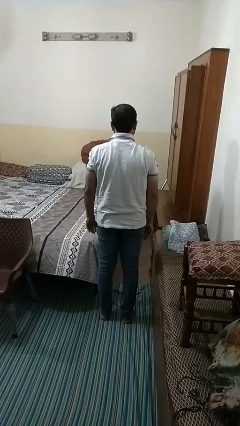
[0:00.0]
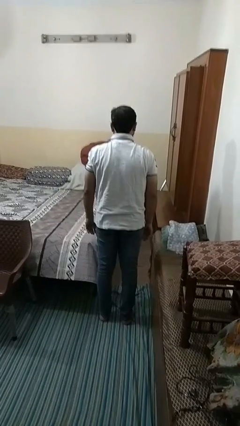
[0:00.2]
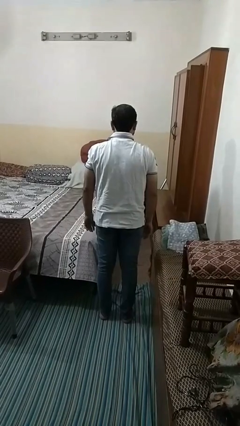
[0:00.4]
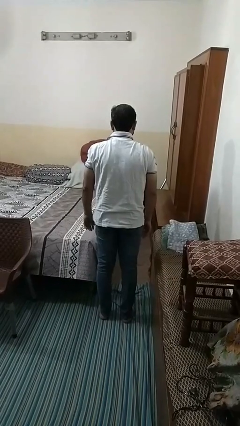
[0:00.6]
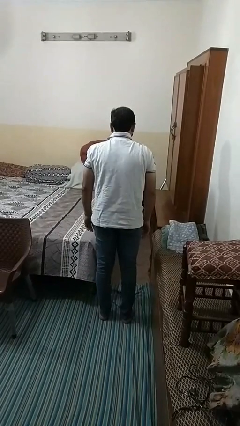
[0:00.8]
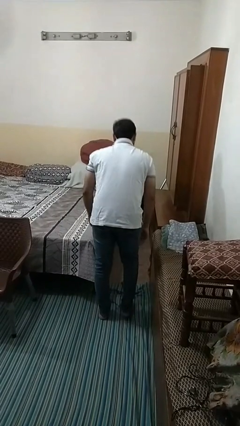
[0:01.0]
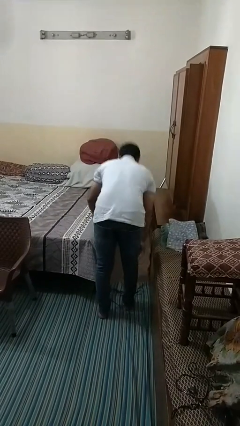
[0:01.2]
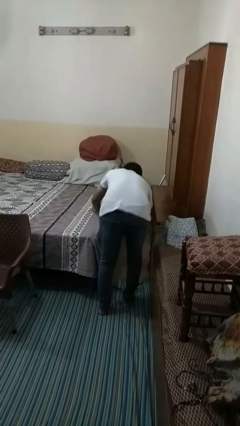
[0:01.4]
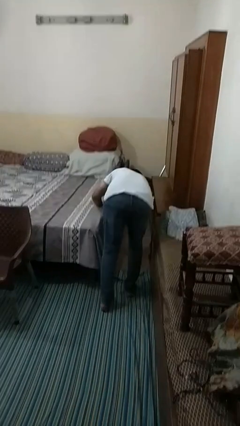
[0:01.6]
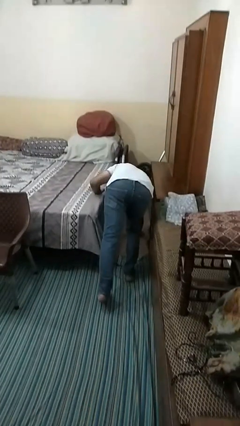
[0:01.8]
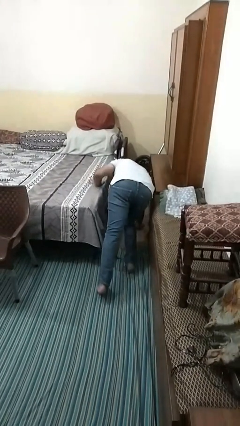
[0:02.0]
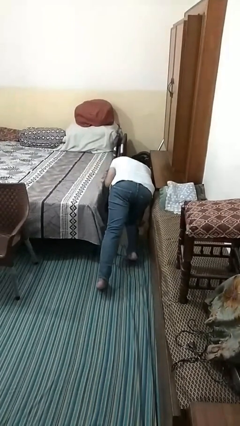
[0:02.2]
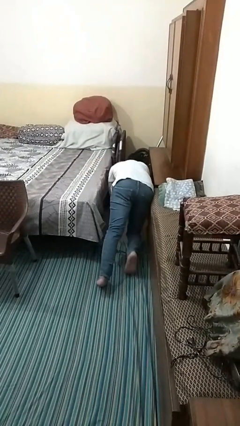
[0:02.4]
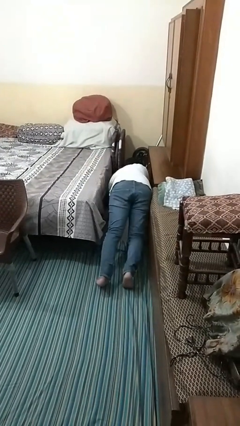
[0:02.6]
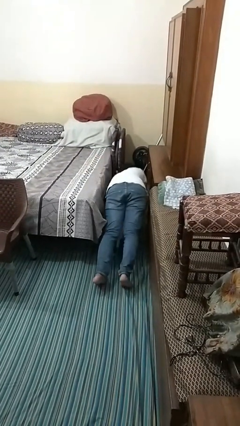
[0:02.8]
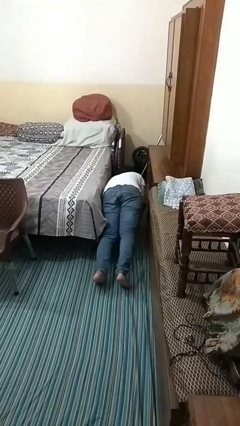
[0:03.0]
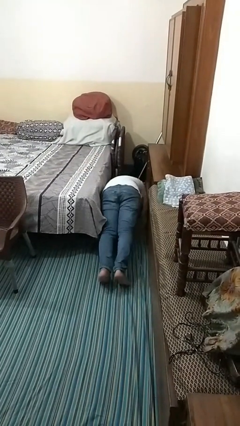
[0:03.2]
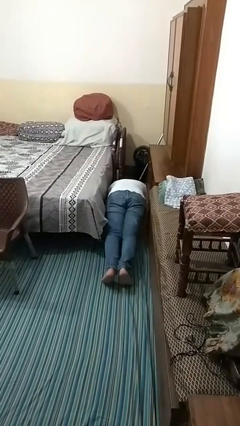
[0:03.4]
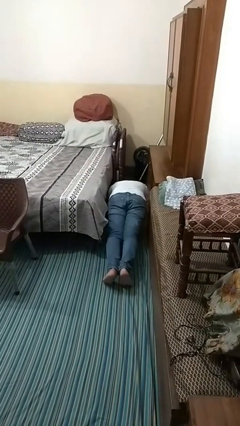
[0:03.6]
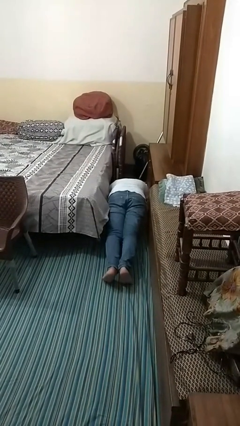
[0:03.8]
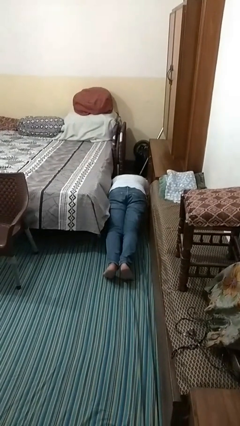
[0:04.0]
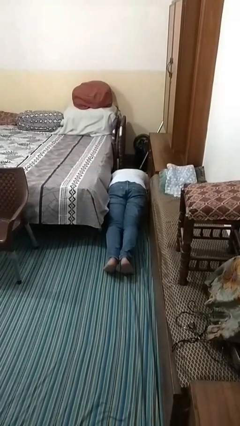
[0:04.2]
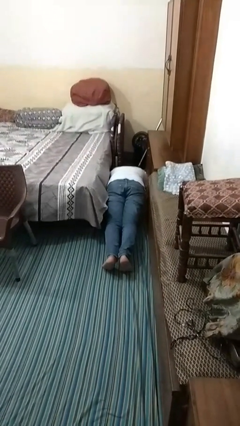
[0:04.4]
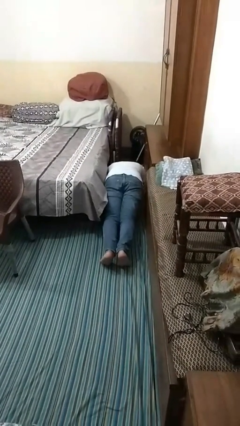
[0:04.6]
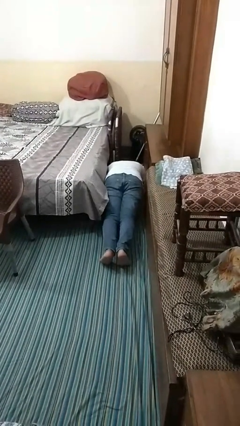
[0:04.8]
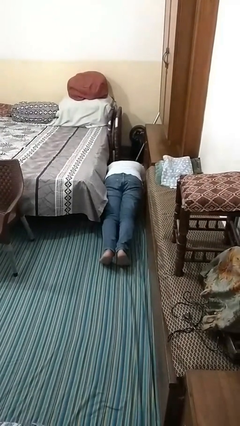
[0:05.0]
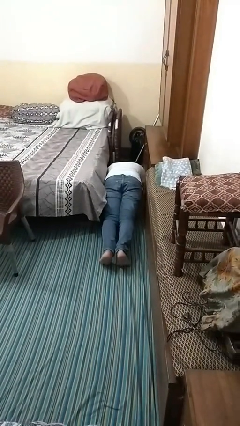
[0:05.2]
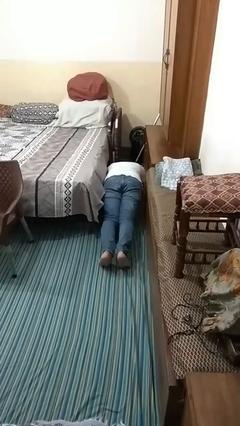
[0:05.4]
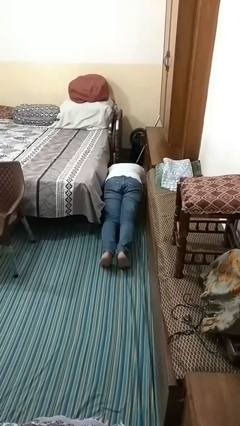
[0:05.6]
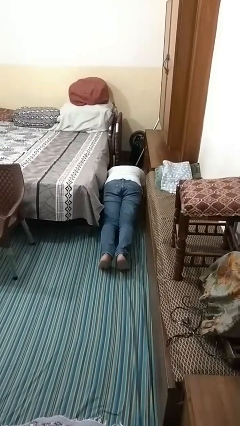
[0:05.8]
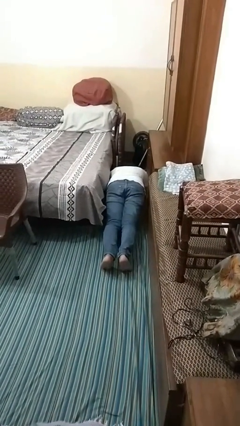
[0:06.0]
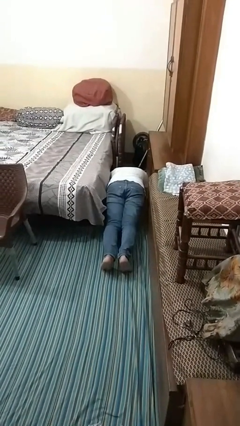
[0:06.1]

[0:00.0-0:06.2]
person exercises with plank

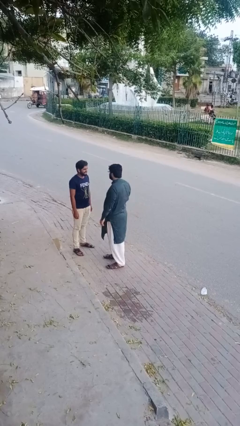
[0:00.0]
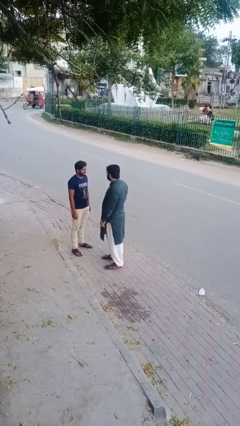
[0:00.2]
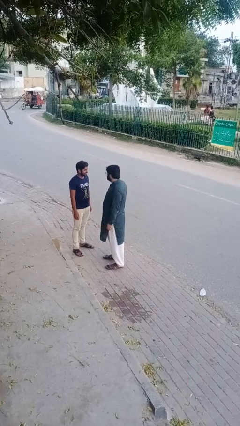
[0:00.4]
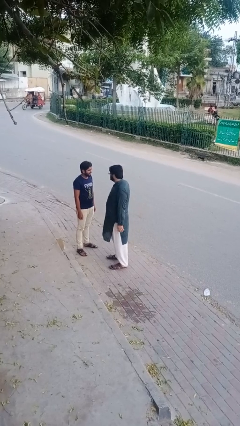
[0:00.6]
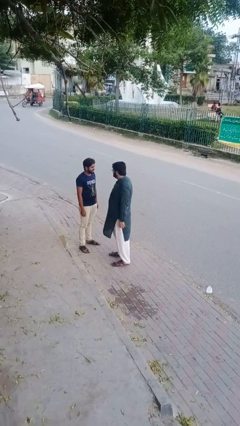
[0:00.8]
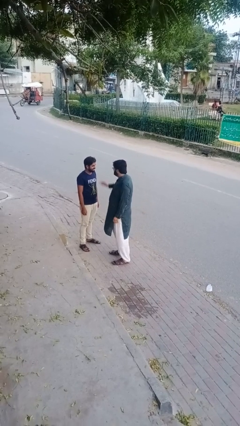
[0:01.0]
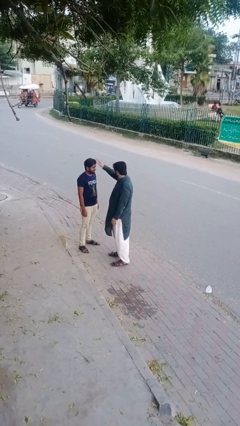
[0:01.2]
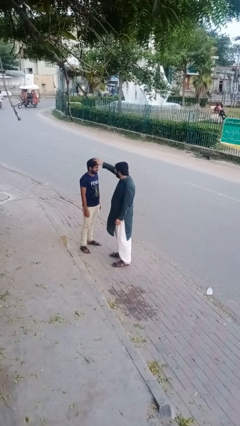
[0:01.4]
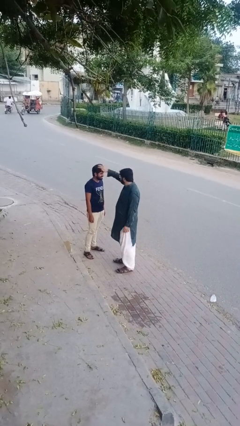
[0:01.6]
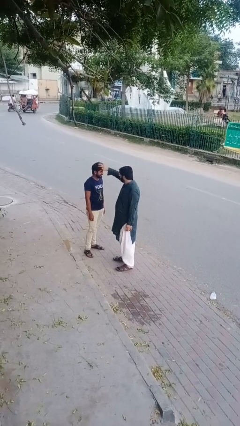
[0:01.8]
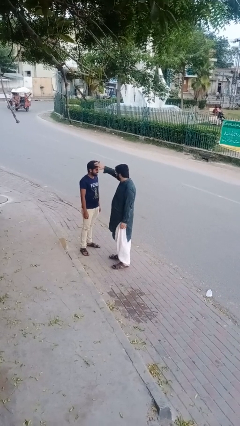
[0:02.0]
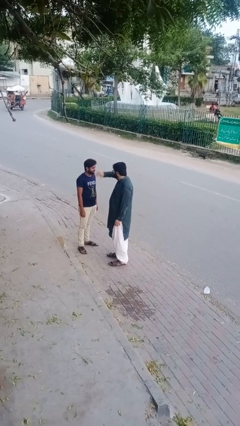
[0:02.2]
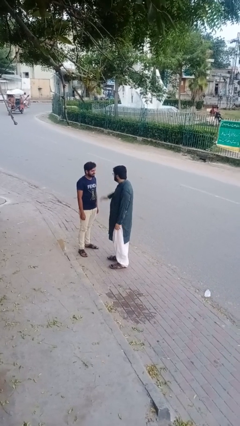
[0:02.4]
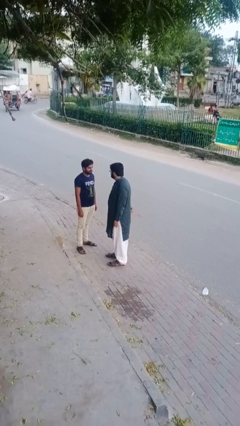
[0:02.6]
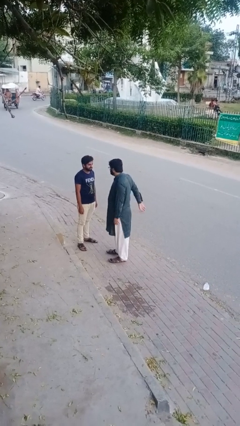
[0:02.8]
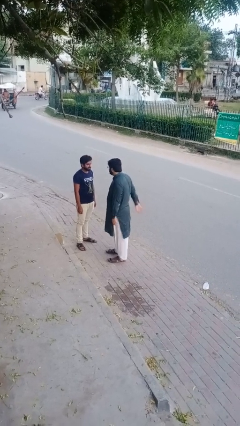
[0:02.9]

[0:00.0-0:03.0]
person grabs person by hair

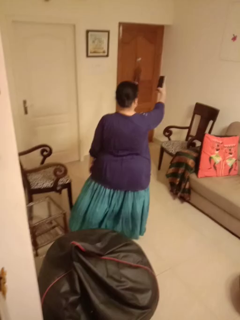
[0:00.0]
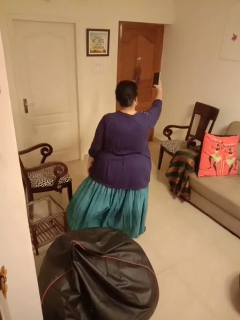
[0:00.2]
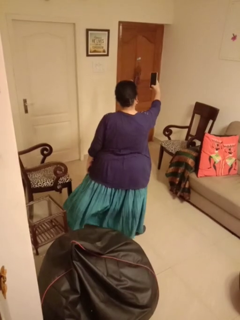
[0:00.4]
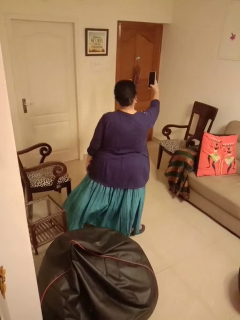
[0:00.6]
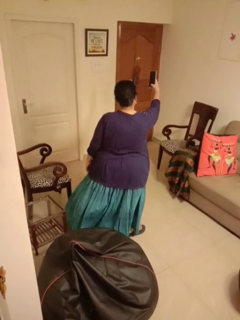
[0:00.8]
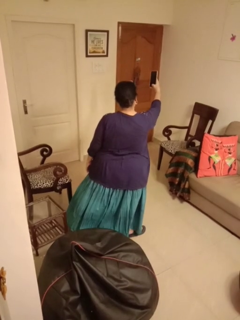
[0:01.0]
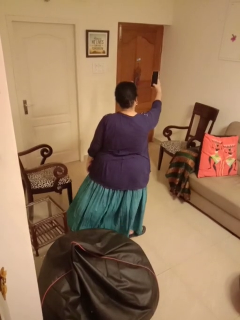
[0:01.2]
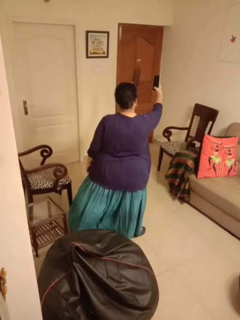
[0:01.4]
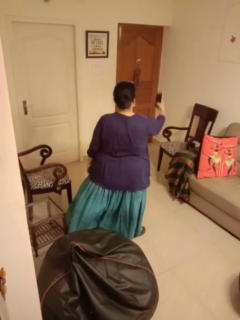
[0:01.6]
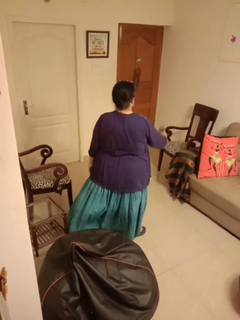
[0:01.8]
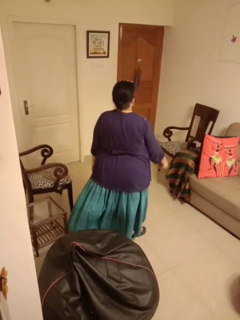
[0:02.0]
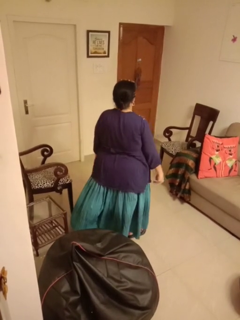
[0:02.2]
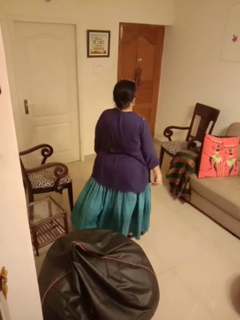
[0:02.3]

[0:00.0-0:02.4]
person takes selfie

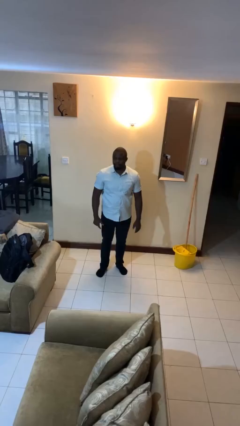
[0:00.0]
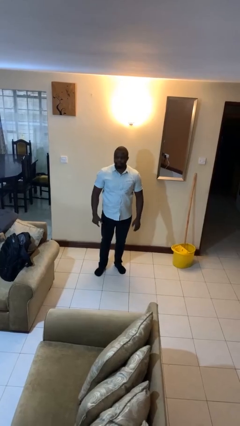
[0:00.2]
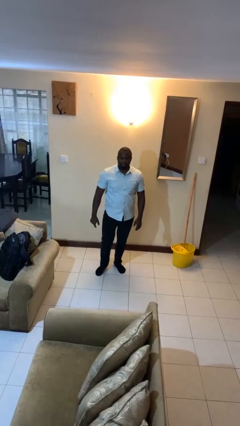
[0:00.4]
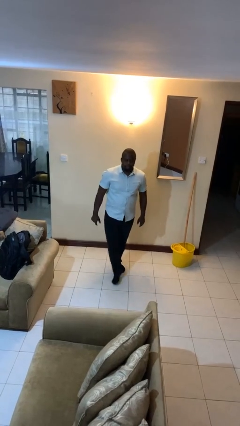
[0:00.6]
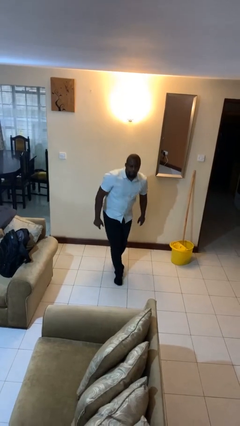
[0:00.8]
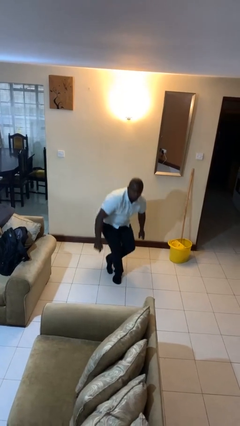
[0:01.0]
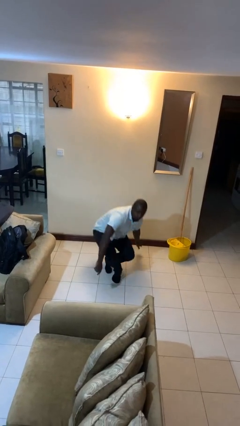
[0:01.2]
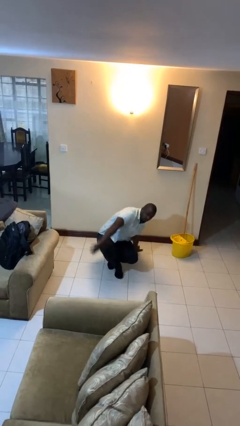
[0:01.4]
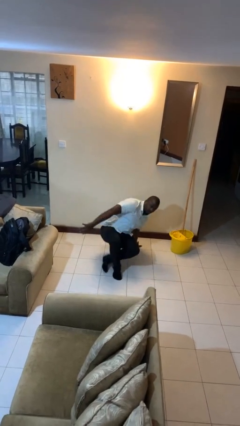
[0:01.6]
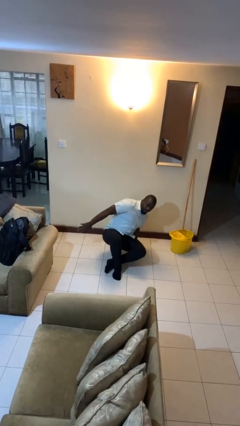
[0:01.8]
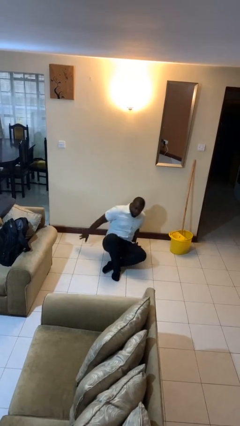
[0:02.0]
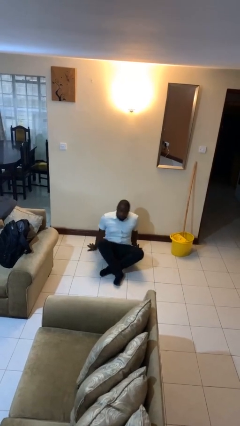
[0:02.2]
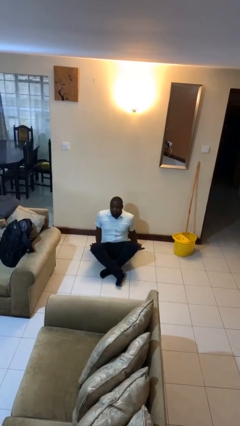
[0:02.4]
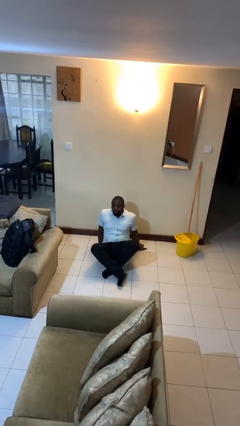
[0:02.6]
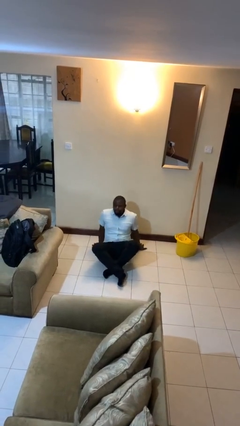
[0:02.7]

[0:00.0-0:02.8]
person sits crisscross

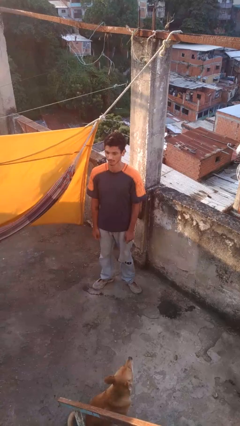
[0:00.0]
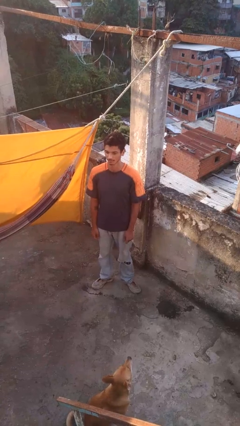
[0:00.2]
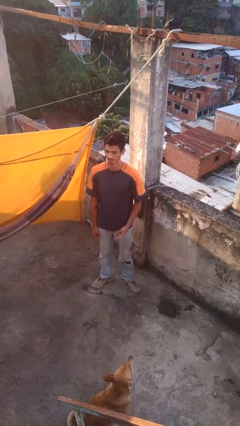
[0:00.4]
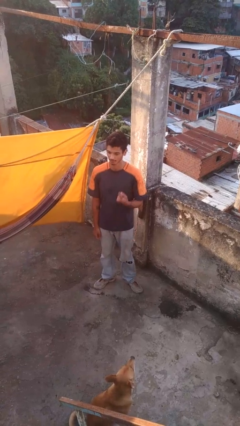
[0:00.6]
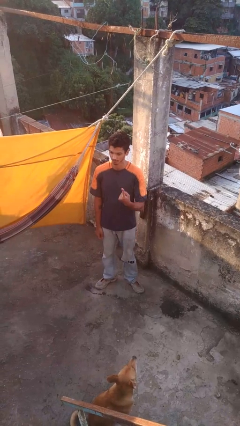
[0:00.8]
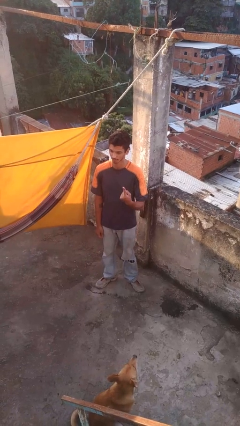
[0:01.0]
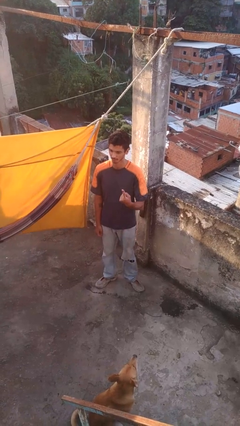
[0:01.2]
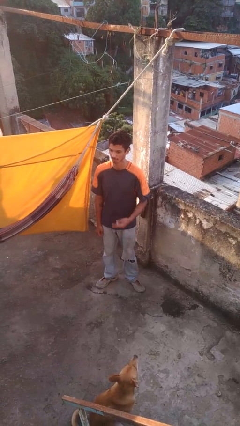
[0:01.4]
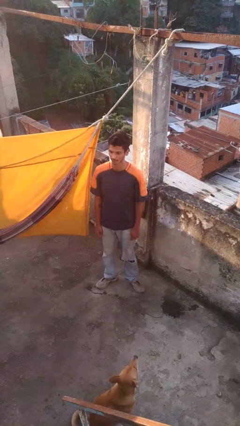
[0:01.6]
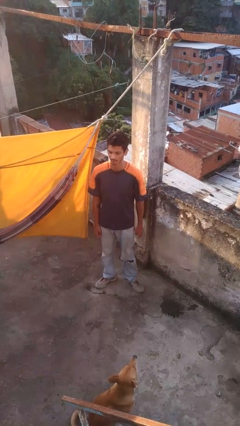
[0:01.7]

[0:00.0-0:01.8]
person gestures number one

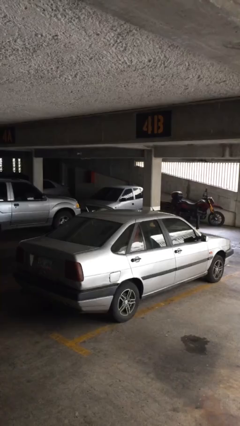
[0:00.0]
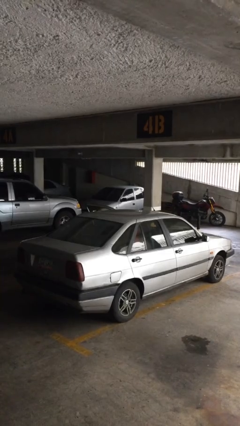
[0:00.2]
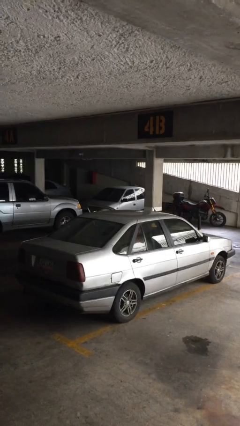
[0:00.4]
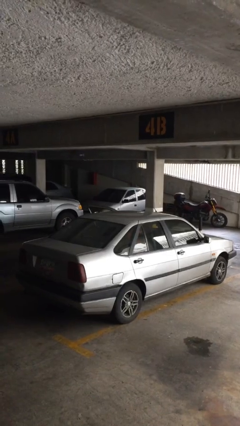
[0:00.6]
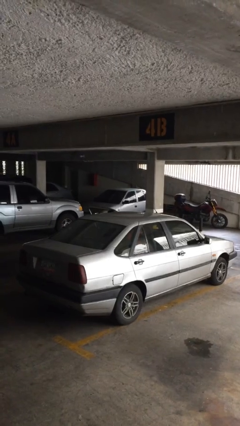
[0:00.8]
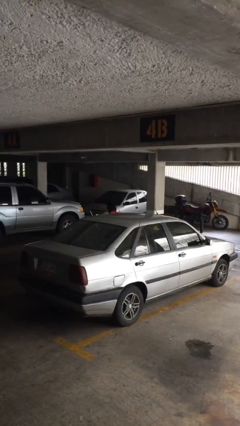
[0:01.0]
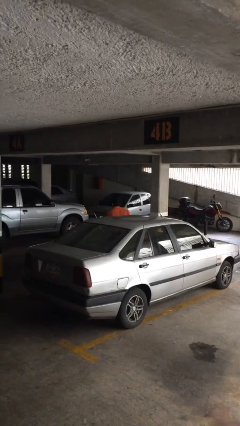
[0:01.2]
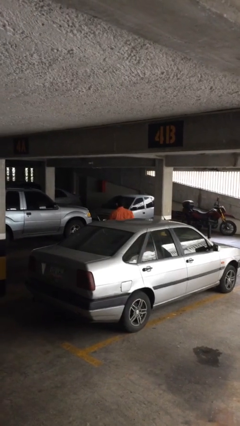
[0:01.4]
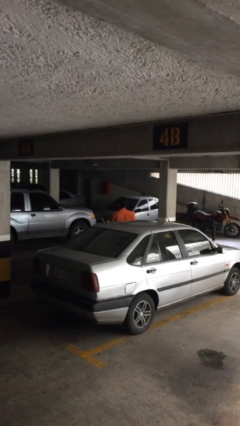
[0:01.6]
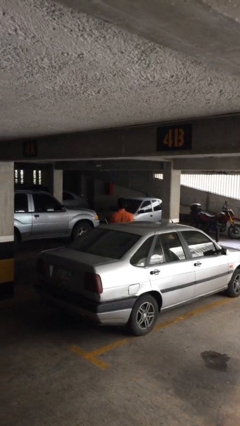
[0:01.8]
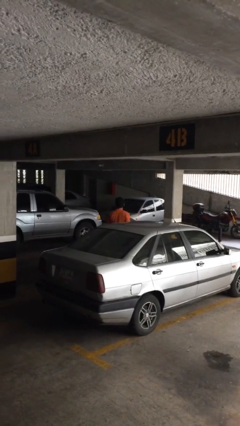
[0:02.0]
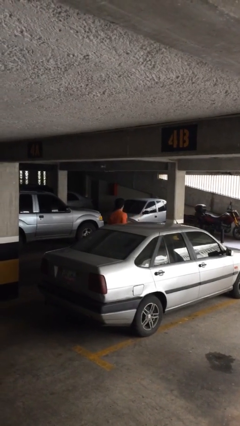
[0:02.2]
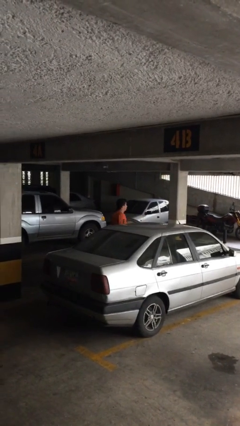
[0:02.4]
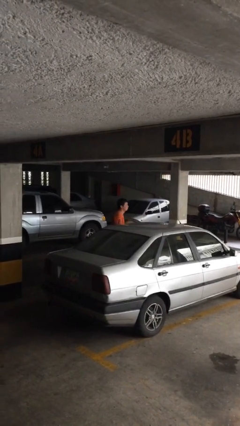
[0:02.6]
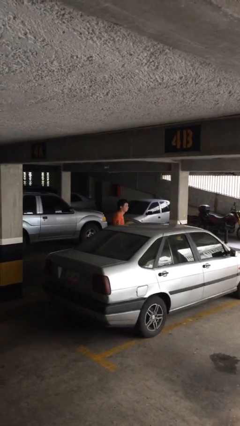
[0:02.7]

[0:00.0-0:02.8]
person exits car
